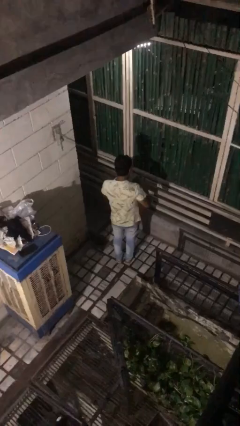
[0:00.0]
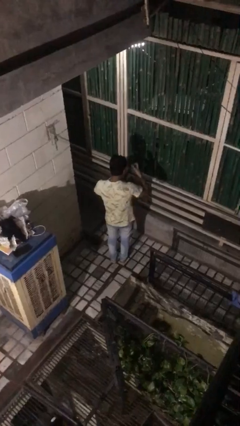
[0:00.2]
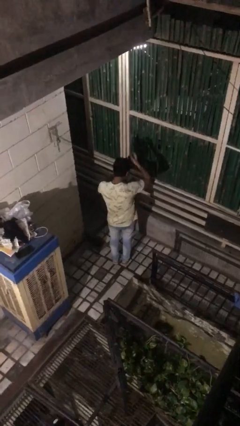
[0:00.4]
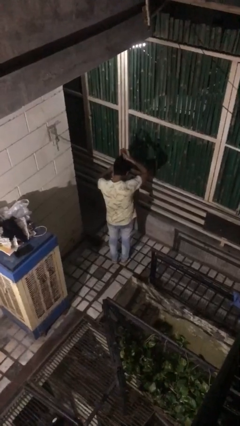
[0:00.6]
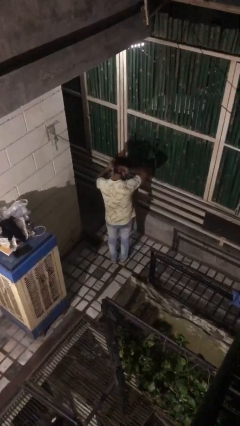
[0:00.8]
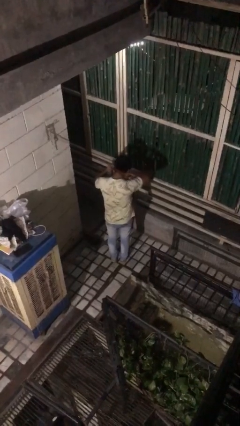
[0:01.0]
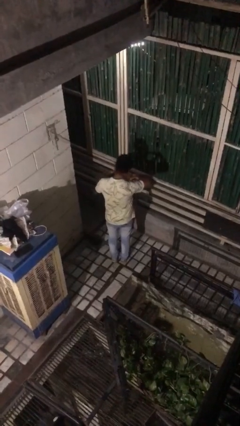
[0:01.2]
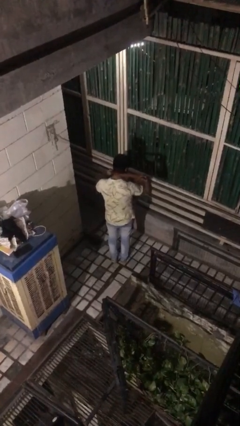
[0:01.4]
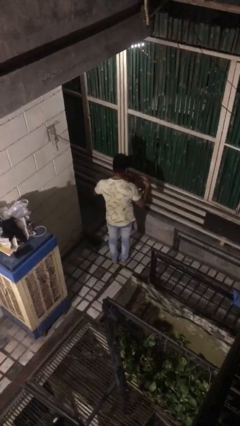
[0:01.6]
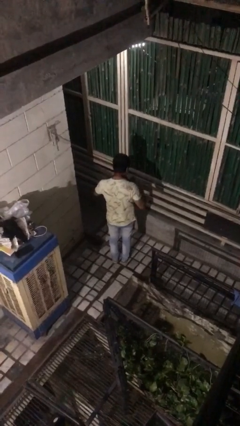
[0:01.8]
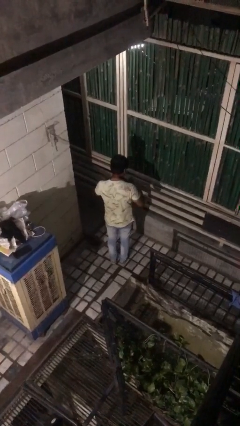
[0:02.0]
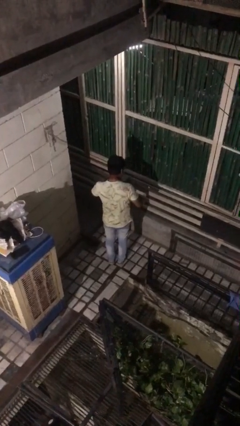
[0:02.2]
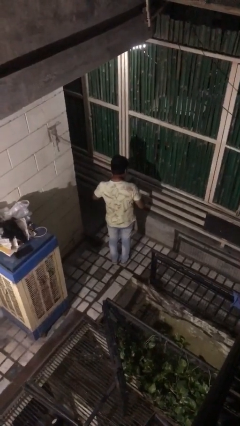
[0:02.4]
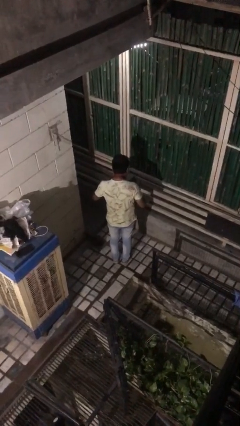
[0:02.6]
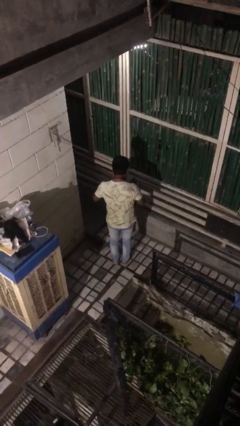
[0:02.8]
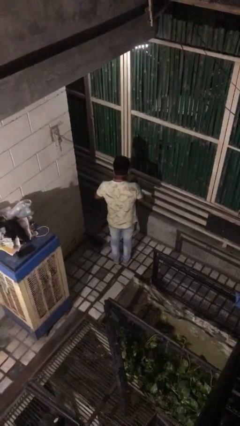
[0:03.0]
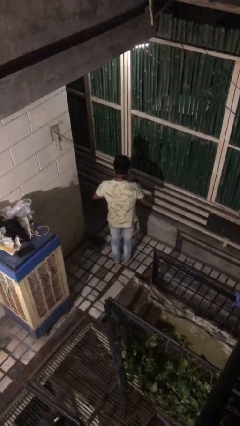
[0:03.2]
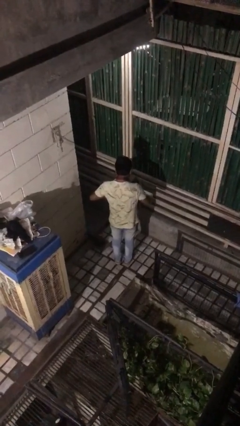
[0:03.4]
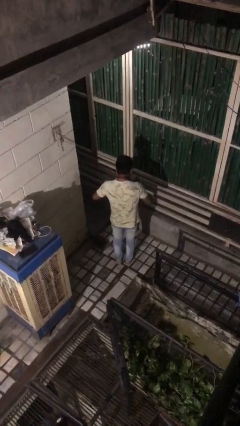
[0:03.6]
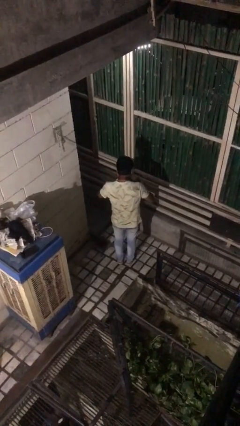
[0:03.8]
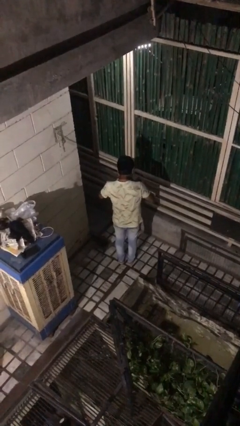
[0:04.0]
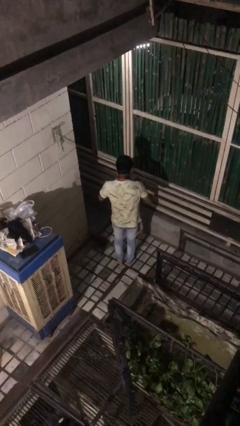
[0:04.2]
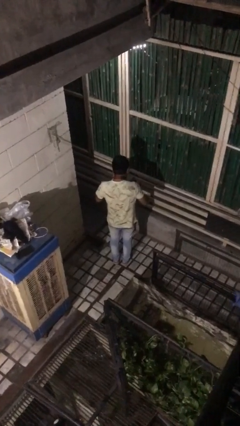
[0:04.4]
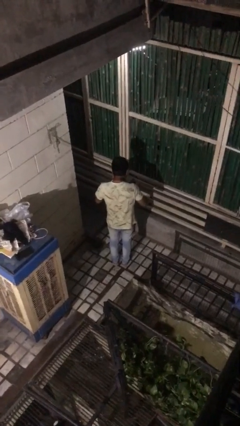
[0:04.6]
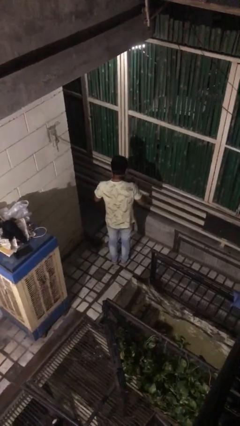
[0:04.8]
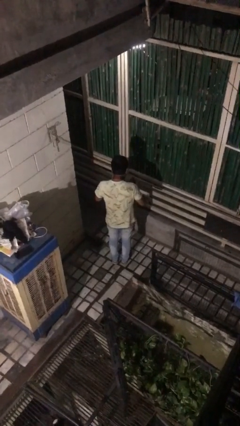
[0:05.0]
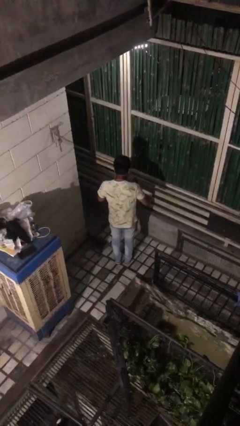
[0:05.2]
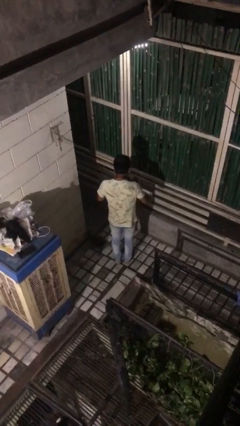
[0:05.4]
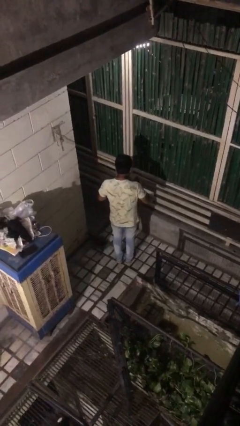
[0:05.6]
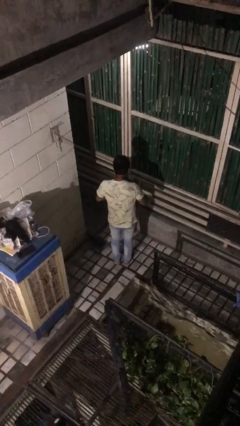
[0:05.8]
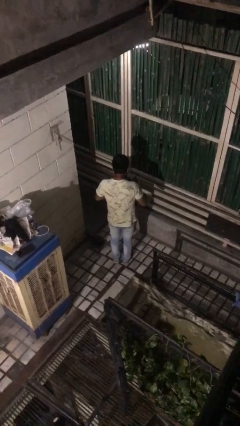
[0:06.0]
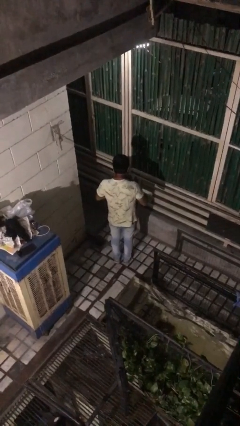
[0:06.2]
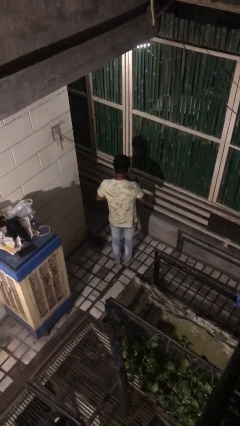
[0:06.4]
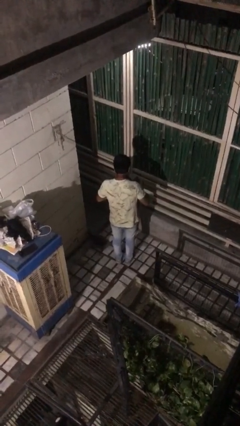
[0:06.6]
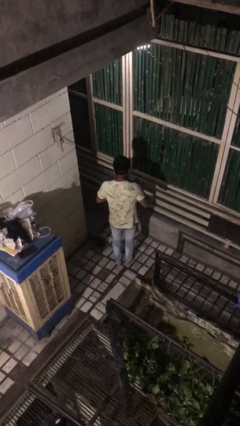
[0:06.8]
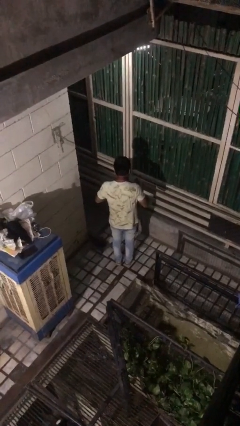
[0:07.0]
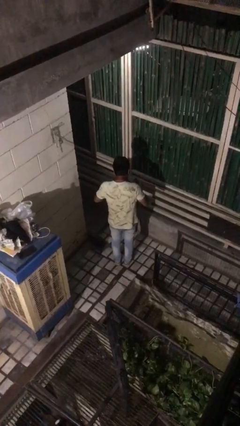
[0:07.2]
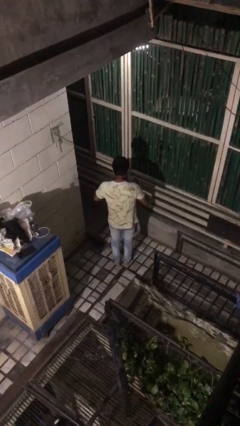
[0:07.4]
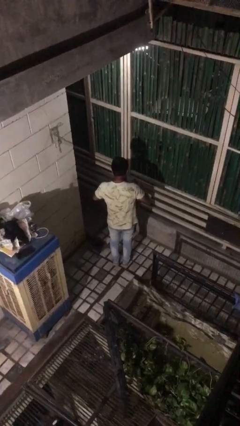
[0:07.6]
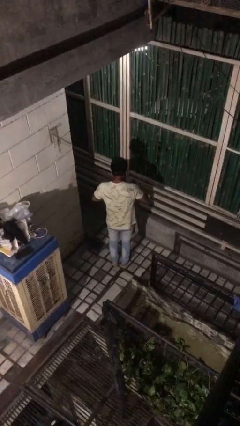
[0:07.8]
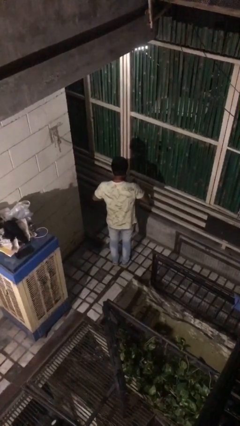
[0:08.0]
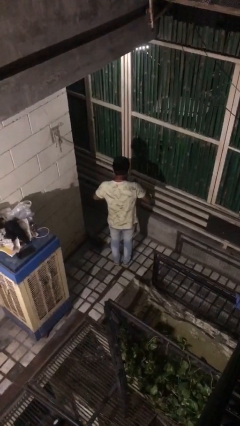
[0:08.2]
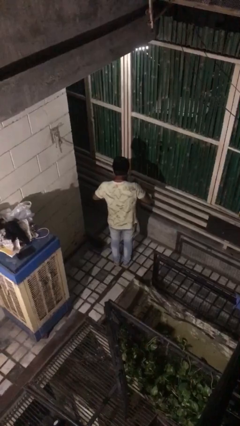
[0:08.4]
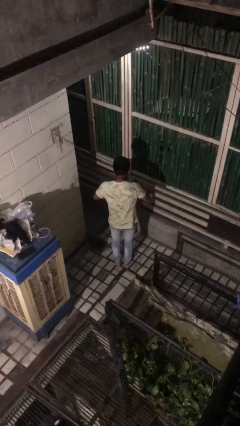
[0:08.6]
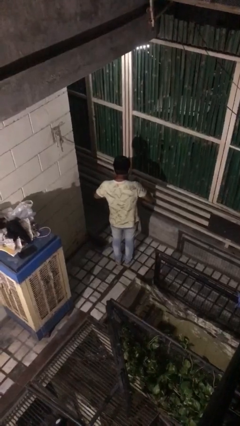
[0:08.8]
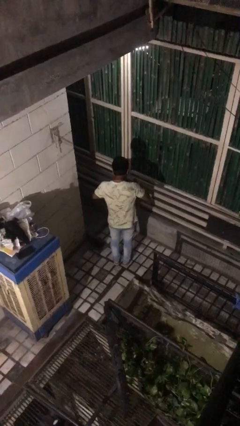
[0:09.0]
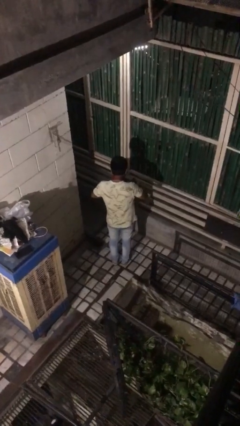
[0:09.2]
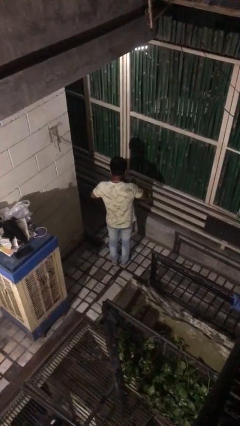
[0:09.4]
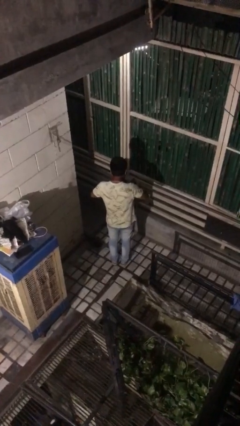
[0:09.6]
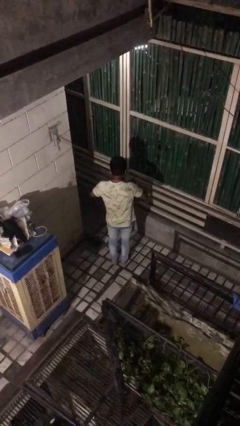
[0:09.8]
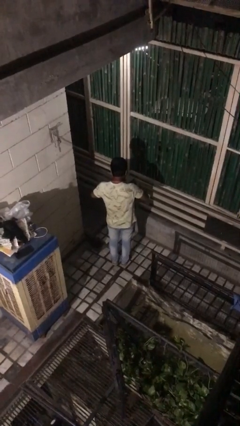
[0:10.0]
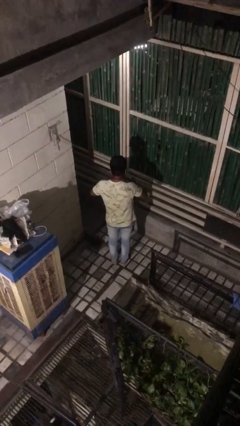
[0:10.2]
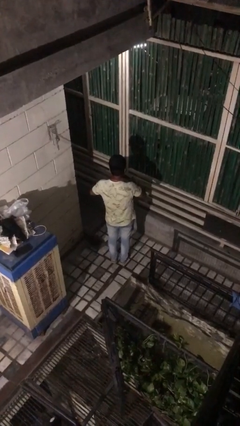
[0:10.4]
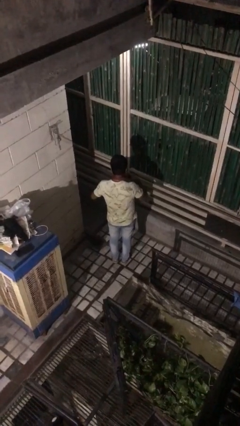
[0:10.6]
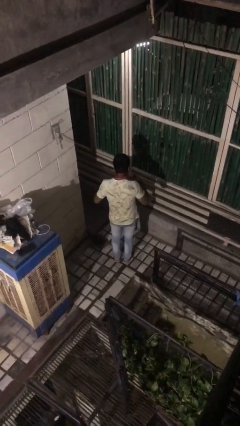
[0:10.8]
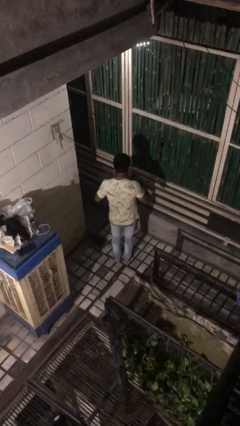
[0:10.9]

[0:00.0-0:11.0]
person puts on necktie

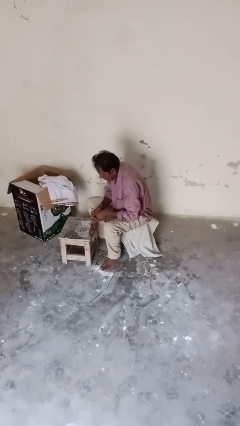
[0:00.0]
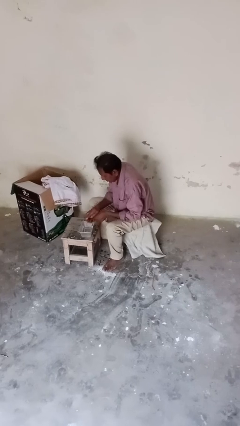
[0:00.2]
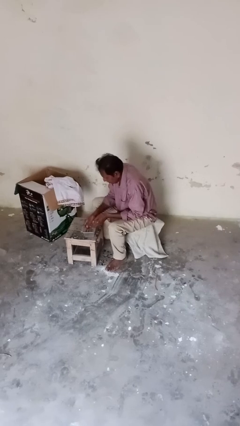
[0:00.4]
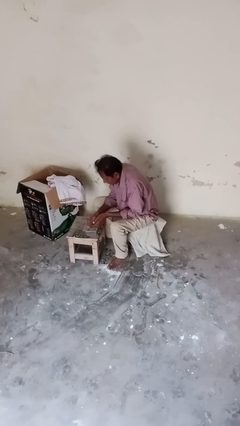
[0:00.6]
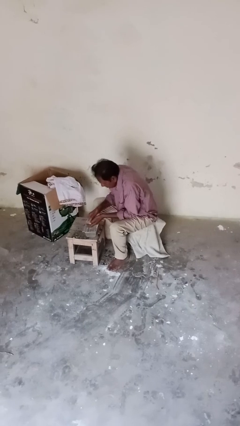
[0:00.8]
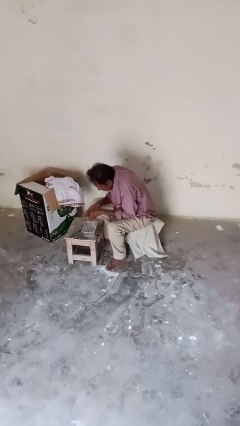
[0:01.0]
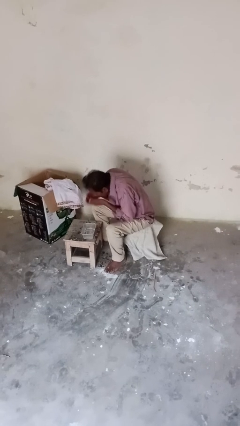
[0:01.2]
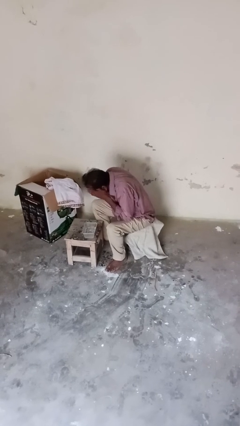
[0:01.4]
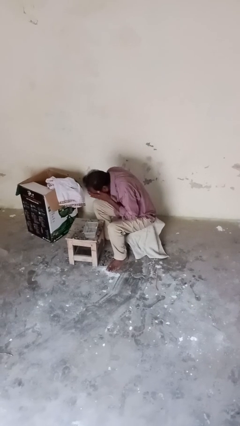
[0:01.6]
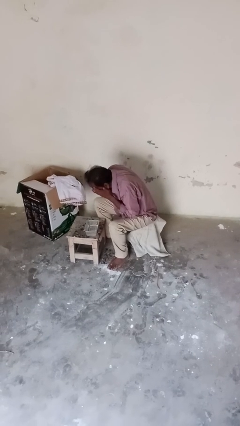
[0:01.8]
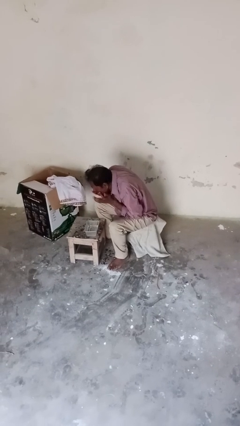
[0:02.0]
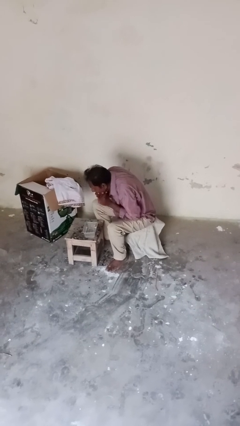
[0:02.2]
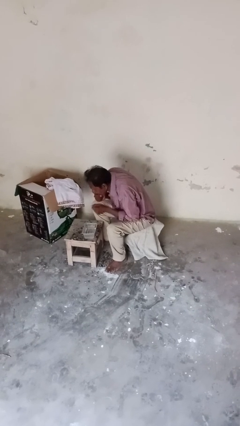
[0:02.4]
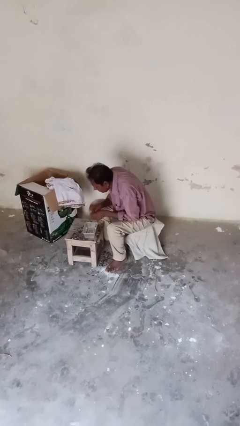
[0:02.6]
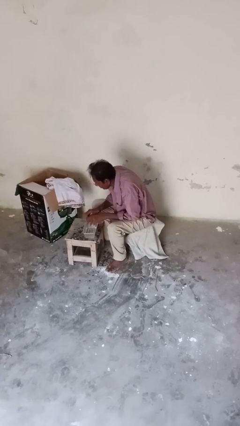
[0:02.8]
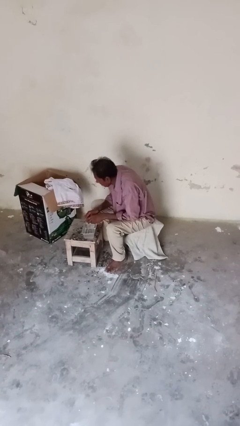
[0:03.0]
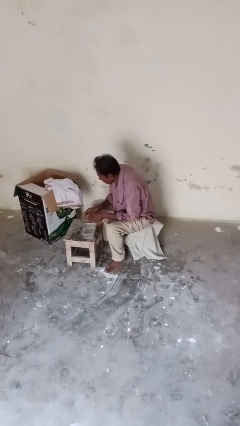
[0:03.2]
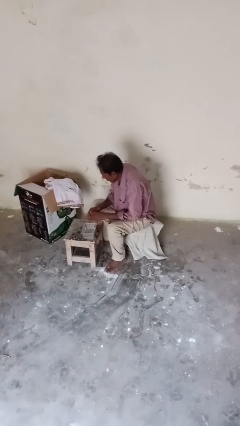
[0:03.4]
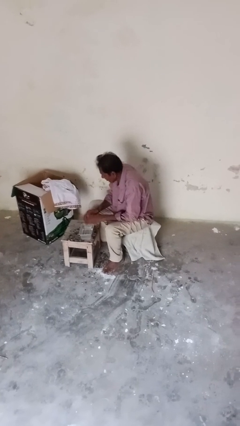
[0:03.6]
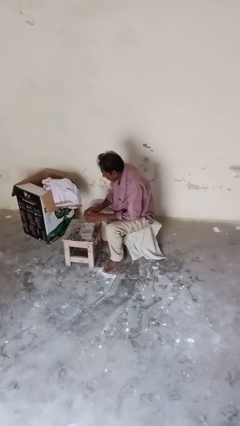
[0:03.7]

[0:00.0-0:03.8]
person washes face

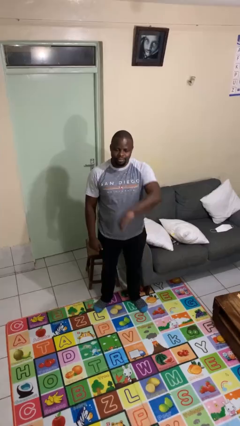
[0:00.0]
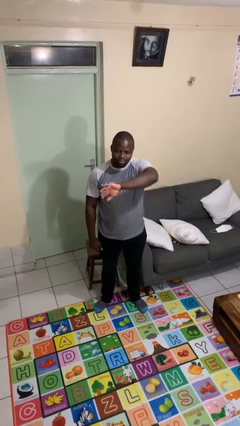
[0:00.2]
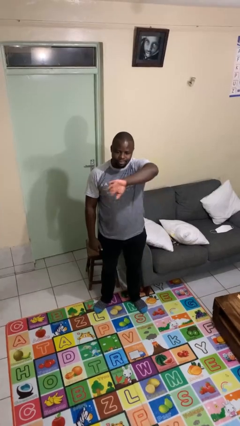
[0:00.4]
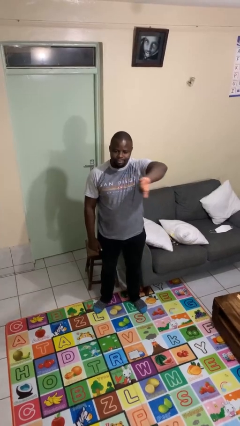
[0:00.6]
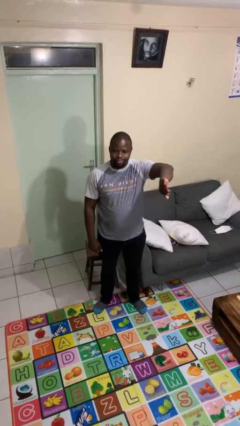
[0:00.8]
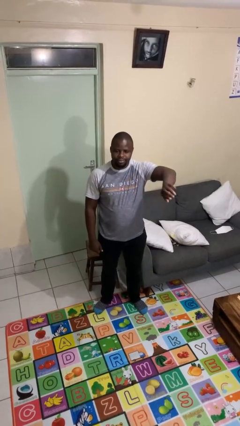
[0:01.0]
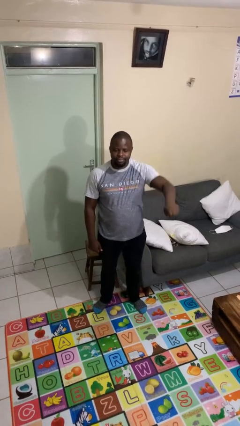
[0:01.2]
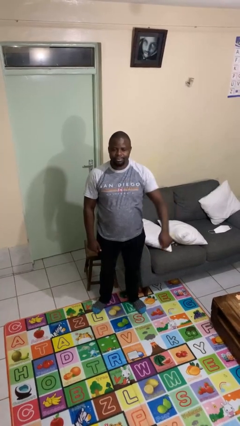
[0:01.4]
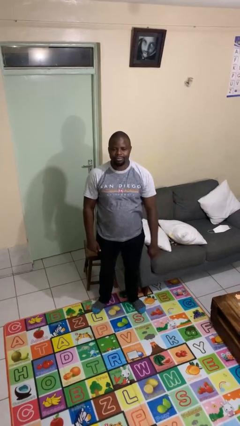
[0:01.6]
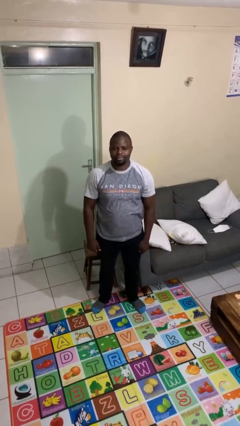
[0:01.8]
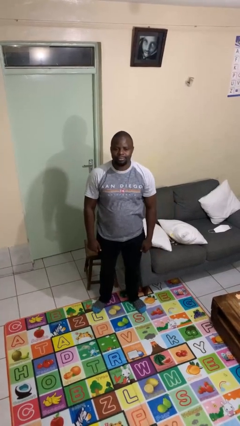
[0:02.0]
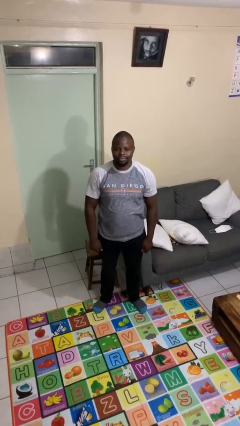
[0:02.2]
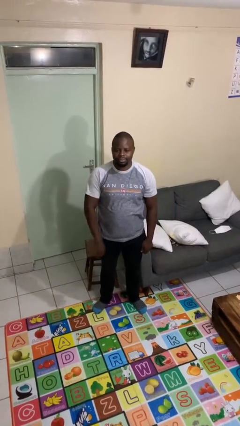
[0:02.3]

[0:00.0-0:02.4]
person gestures swipe left

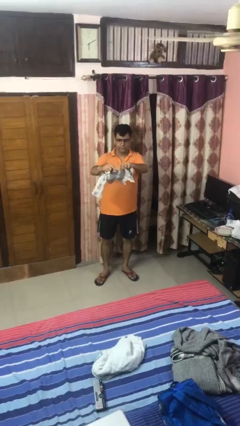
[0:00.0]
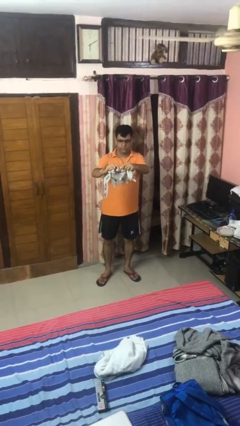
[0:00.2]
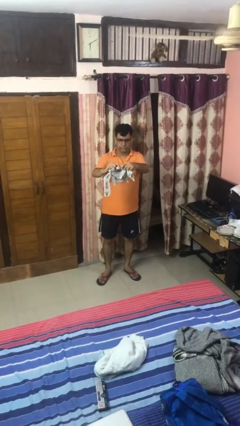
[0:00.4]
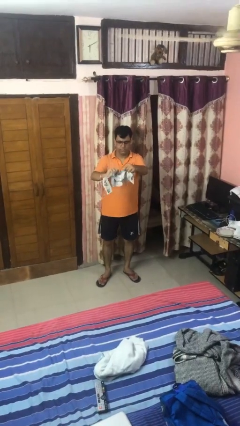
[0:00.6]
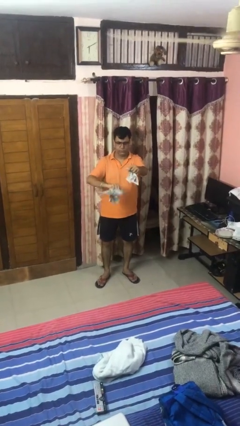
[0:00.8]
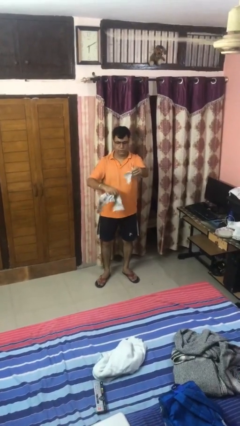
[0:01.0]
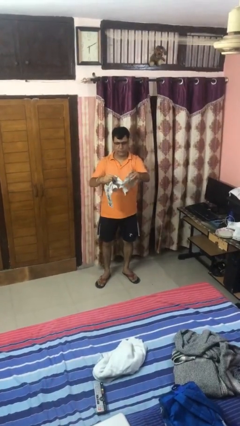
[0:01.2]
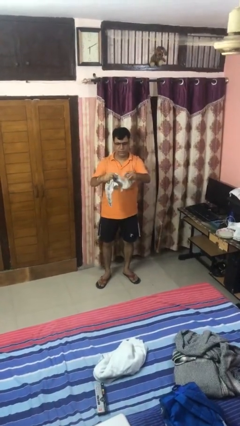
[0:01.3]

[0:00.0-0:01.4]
person tears paper
